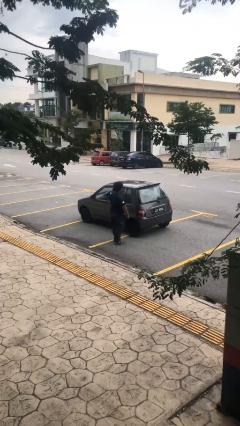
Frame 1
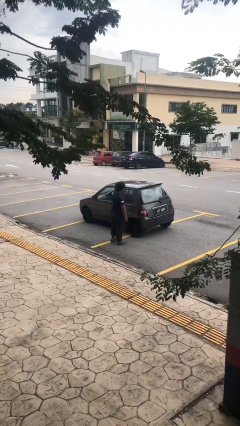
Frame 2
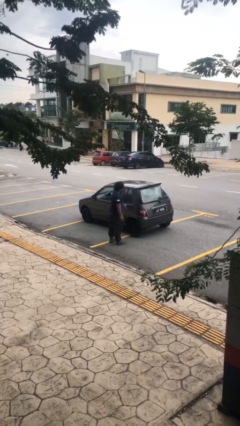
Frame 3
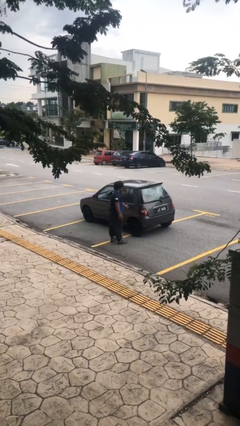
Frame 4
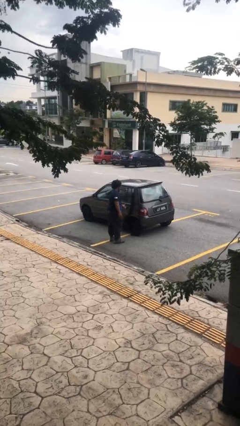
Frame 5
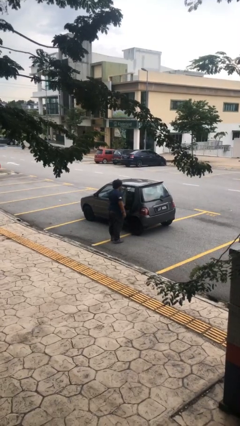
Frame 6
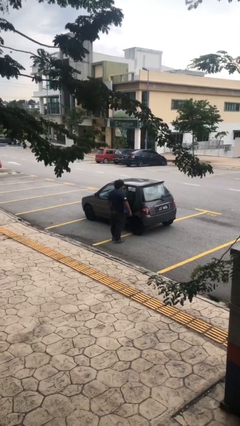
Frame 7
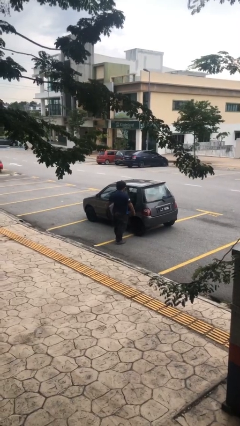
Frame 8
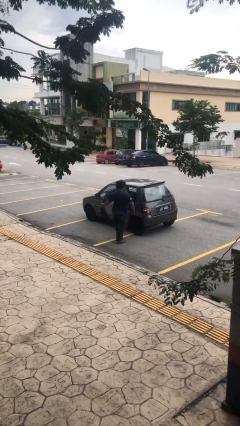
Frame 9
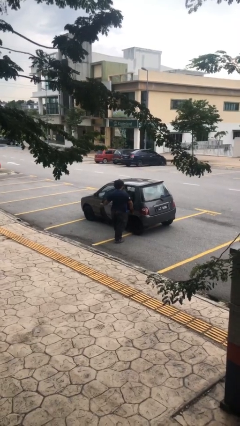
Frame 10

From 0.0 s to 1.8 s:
person opens car door

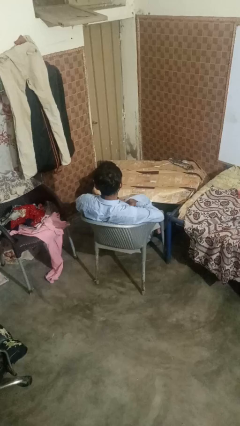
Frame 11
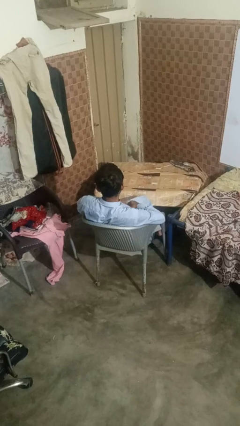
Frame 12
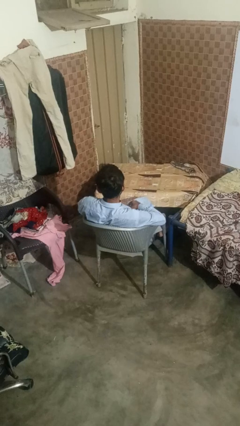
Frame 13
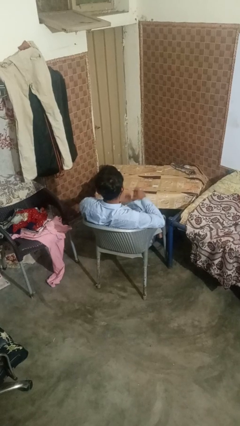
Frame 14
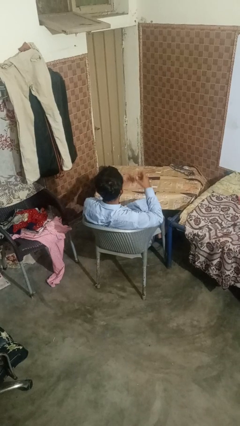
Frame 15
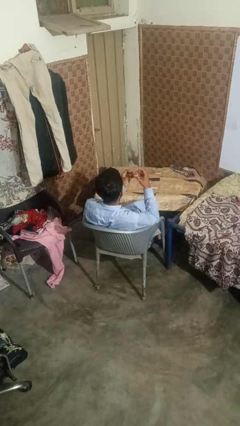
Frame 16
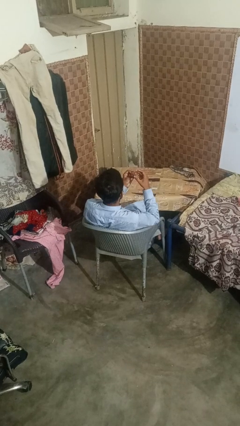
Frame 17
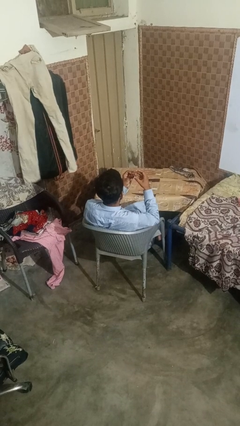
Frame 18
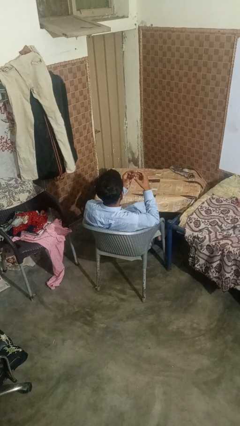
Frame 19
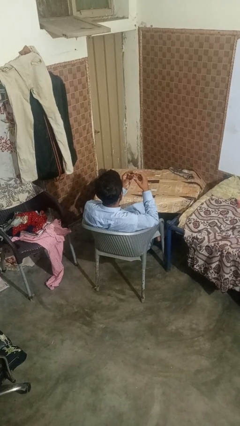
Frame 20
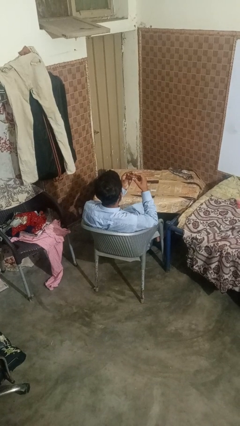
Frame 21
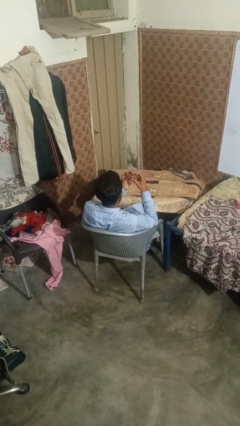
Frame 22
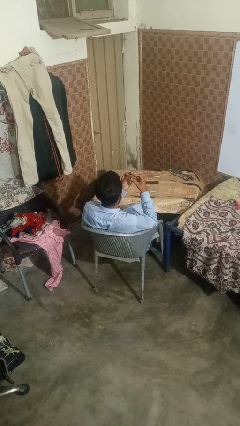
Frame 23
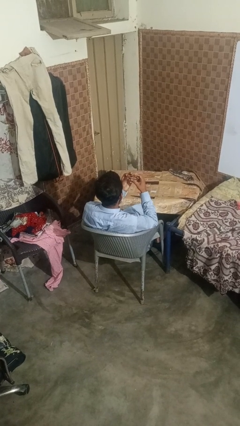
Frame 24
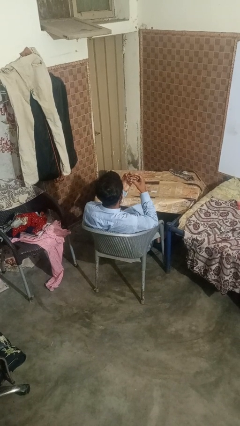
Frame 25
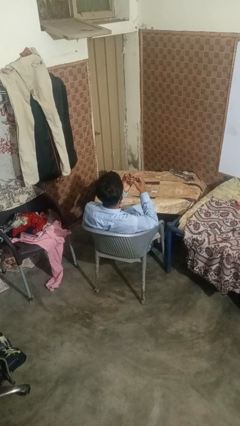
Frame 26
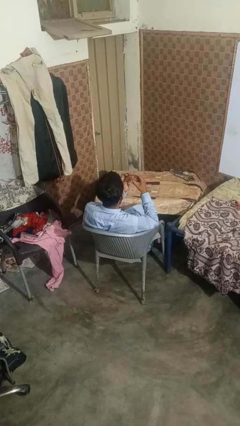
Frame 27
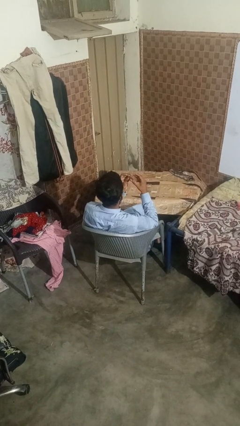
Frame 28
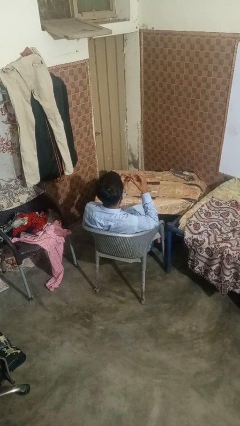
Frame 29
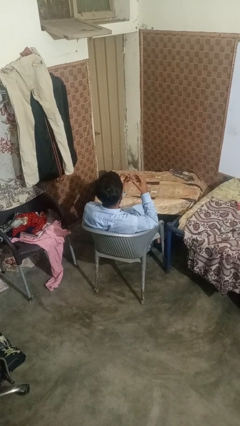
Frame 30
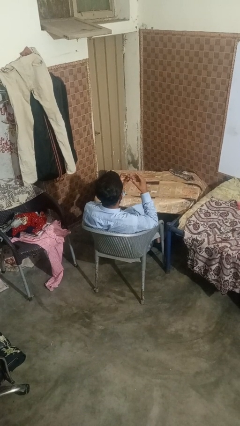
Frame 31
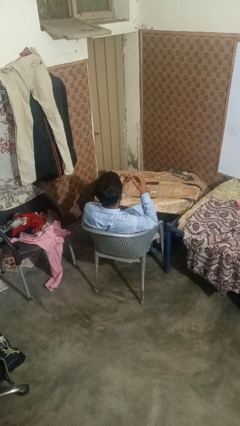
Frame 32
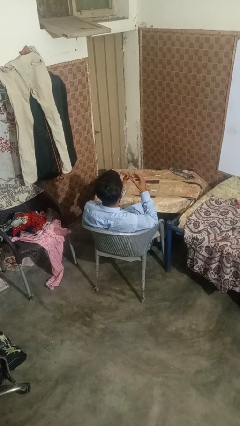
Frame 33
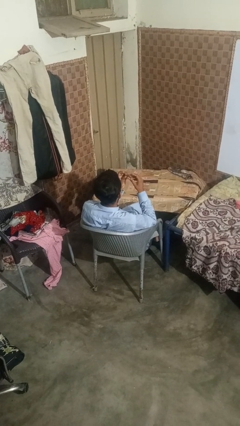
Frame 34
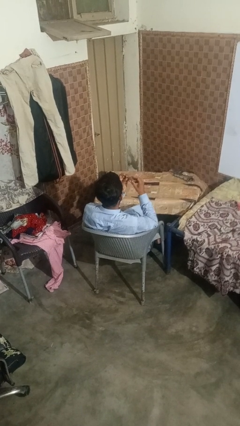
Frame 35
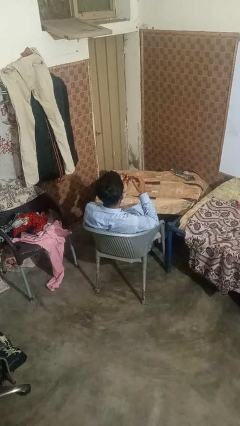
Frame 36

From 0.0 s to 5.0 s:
person clips fingernails

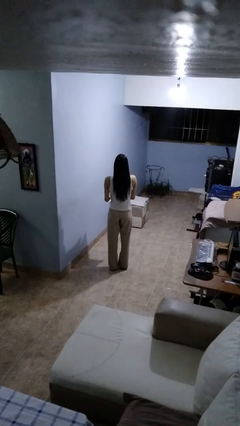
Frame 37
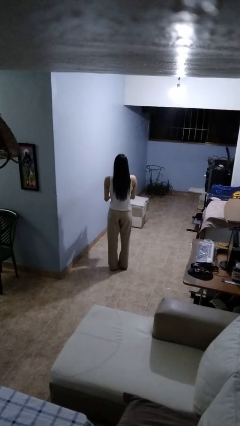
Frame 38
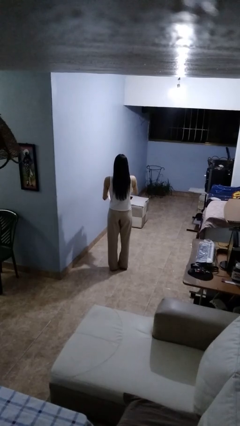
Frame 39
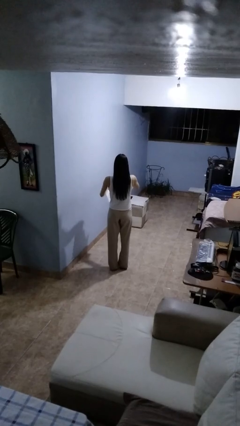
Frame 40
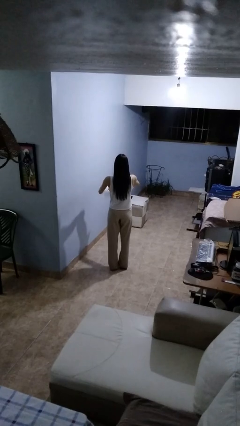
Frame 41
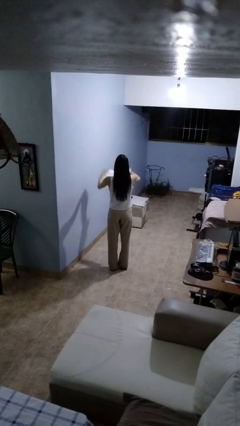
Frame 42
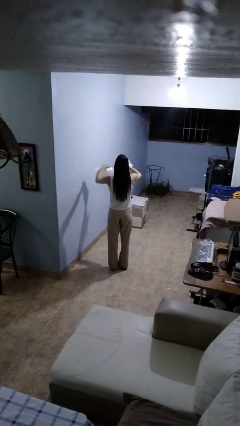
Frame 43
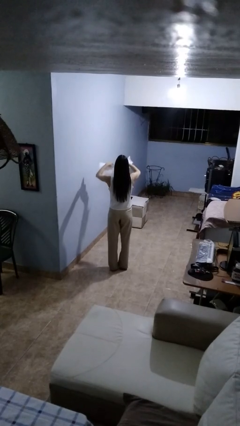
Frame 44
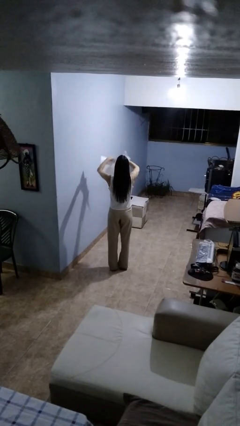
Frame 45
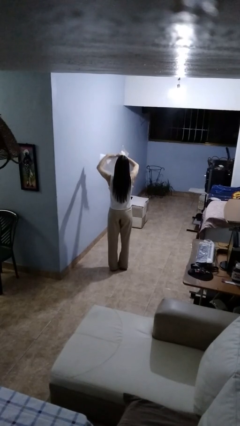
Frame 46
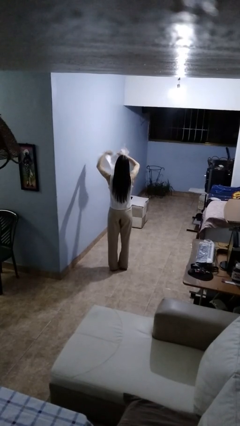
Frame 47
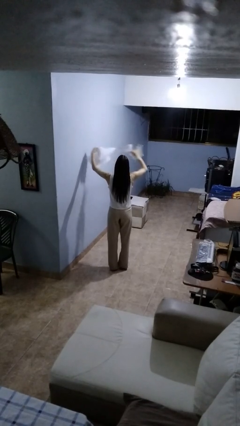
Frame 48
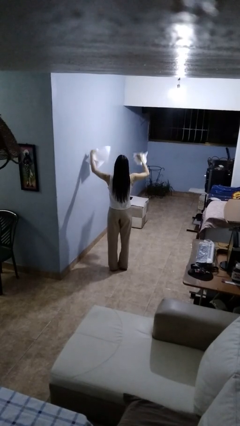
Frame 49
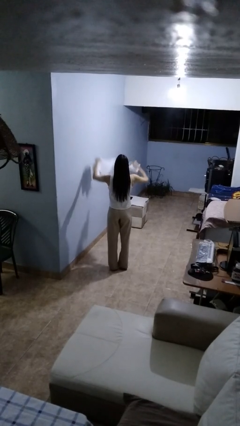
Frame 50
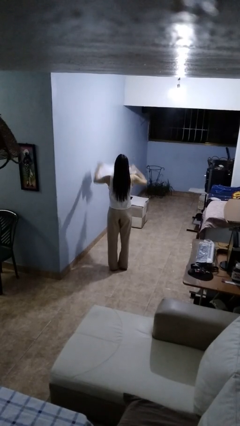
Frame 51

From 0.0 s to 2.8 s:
person tears paper

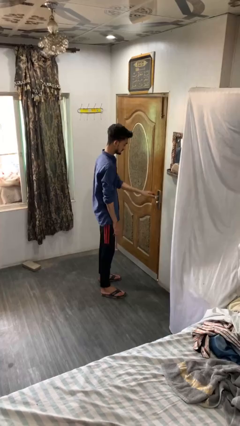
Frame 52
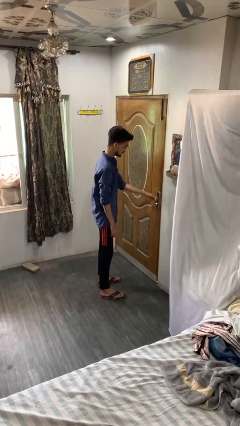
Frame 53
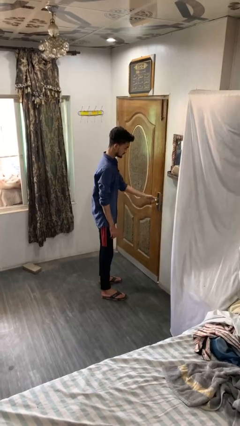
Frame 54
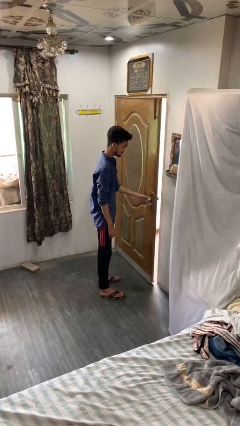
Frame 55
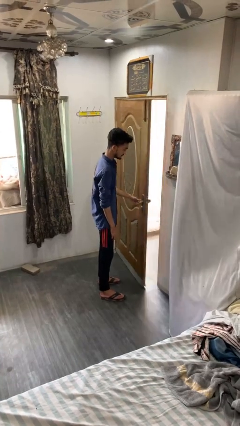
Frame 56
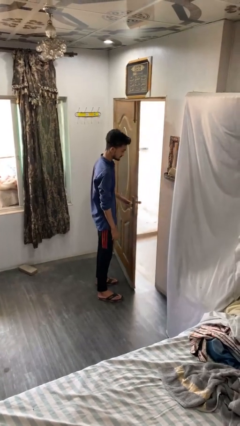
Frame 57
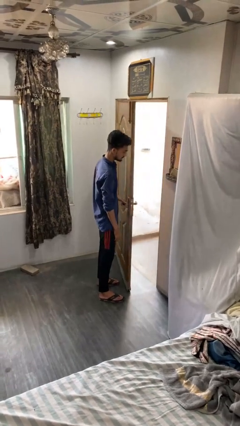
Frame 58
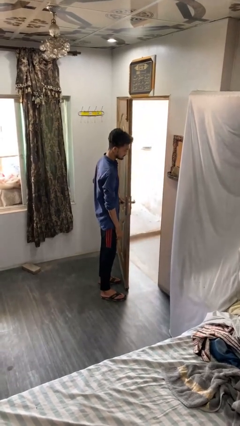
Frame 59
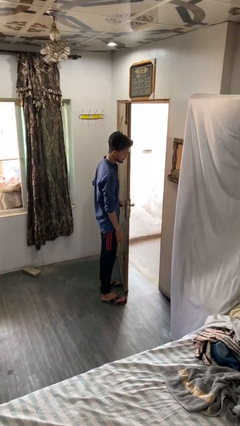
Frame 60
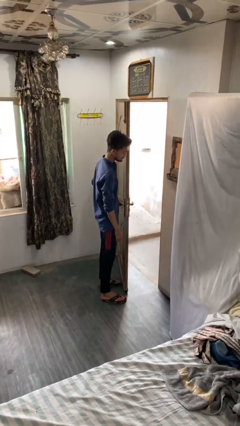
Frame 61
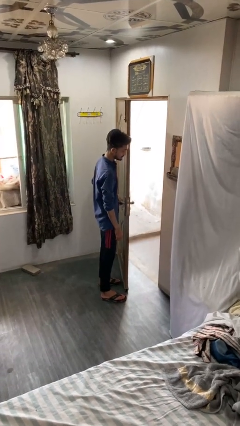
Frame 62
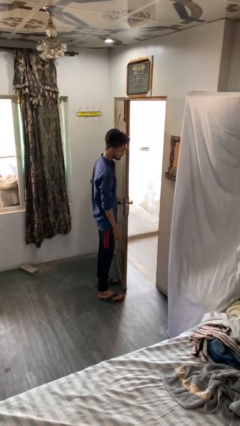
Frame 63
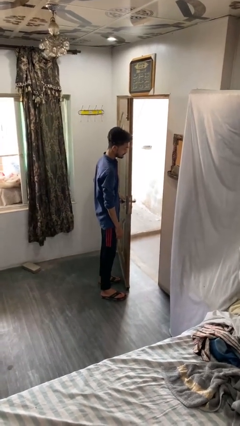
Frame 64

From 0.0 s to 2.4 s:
person opens facility door

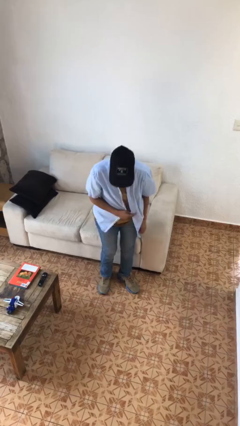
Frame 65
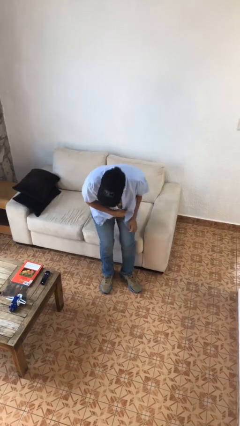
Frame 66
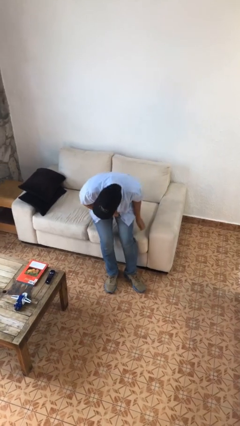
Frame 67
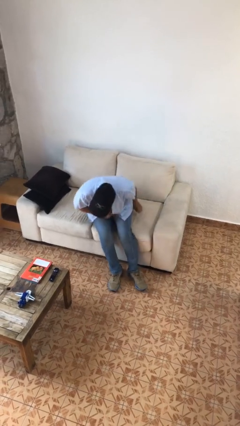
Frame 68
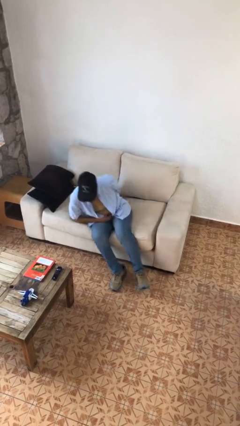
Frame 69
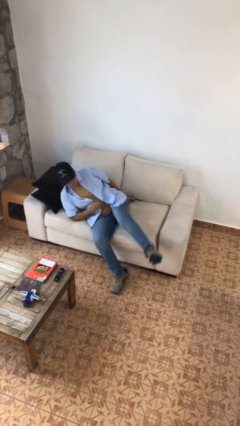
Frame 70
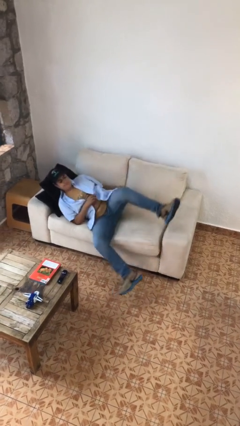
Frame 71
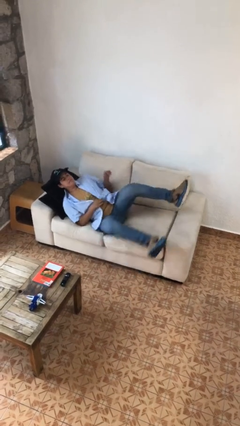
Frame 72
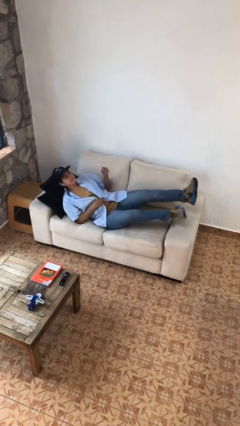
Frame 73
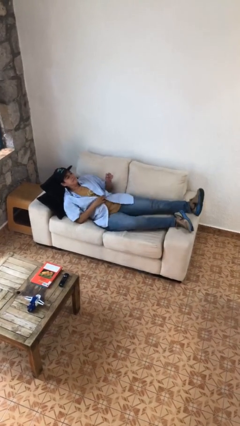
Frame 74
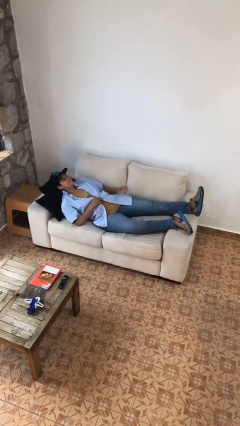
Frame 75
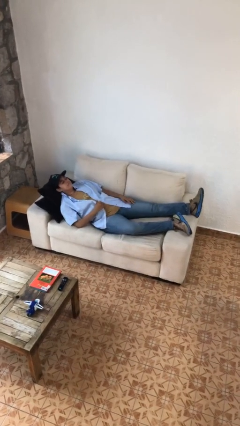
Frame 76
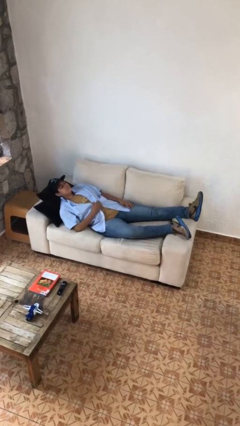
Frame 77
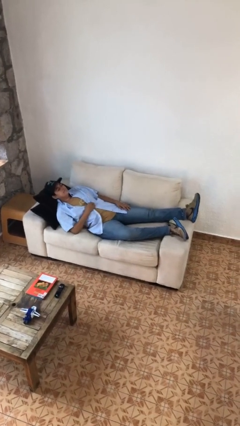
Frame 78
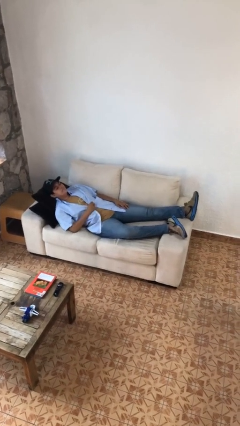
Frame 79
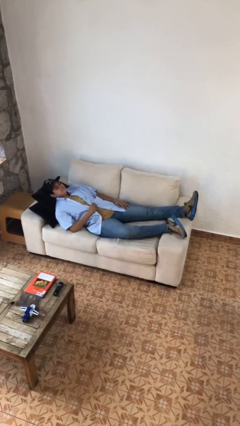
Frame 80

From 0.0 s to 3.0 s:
person lies down on couch

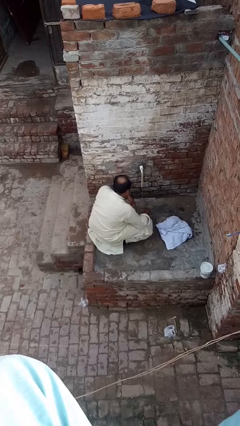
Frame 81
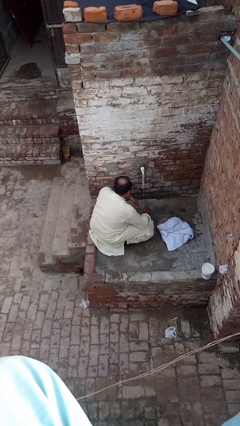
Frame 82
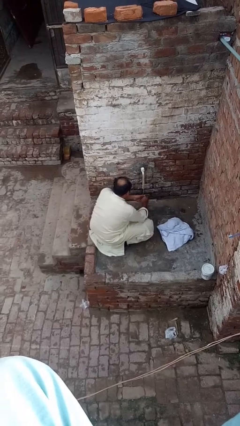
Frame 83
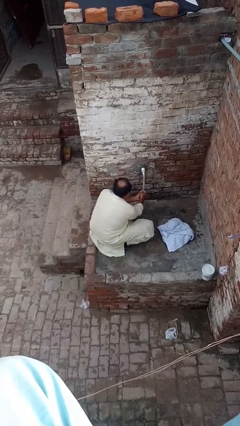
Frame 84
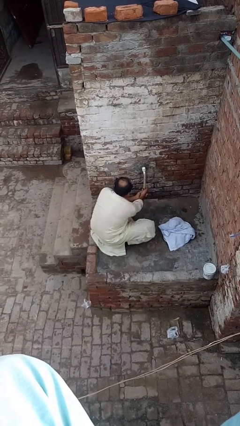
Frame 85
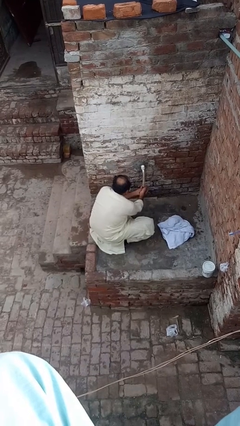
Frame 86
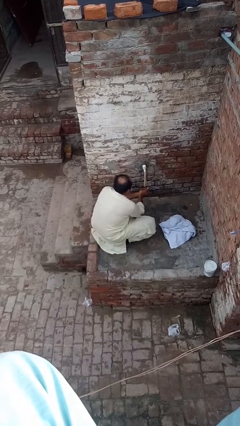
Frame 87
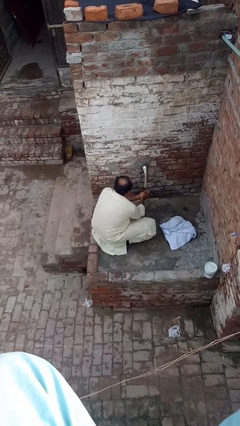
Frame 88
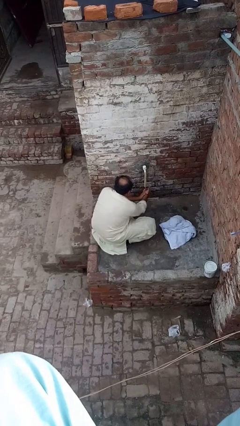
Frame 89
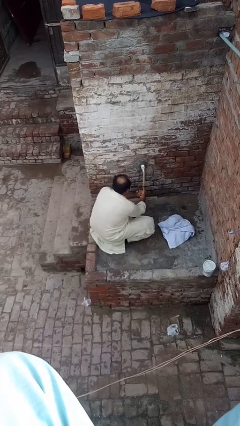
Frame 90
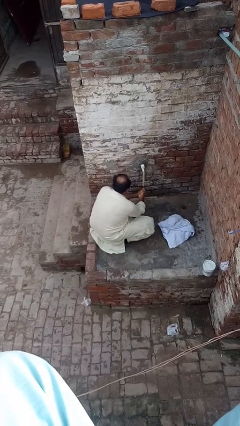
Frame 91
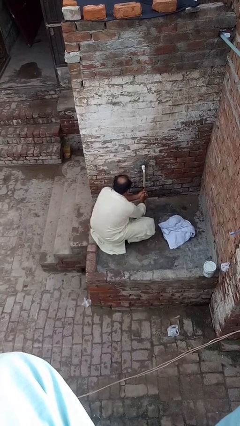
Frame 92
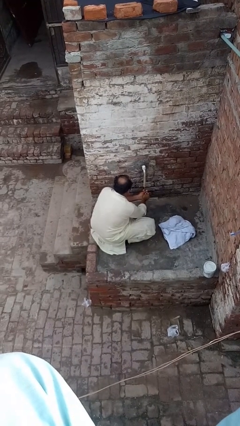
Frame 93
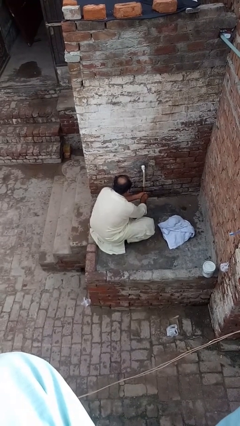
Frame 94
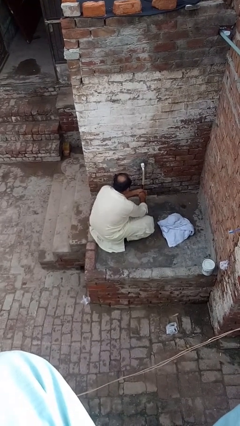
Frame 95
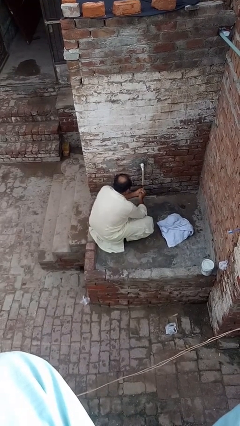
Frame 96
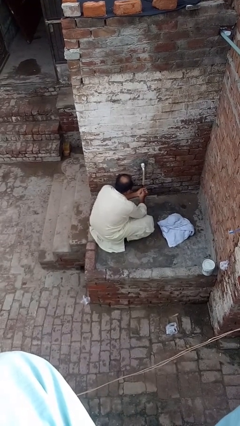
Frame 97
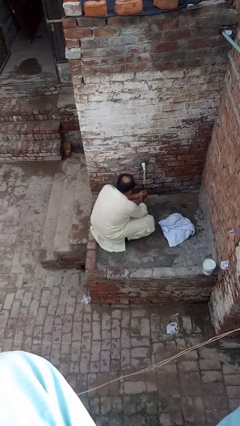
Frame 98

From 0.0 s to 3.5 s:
person washes hands
